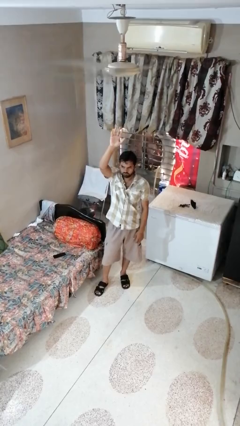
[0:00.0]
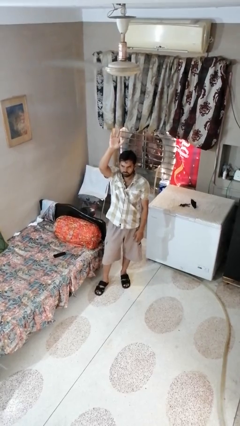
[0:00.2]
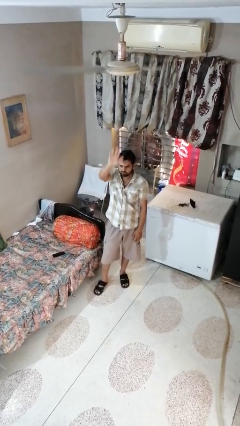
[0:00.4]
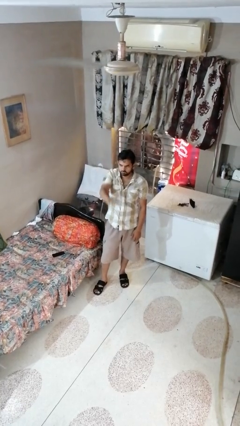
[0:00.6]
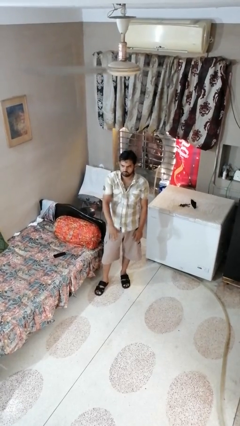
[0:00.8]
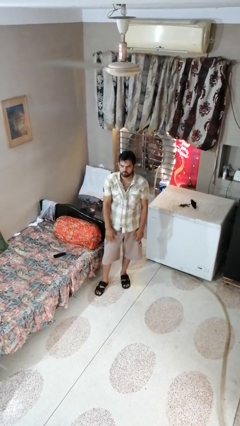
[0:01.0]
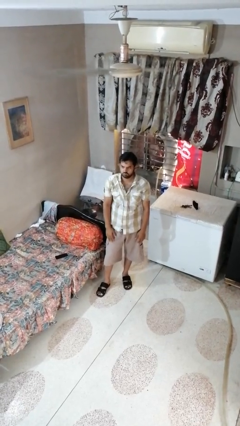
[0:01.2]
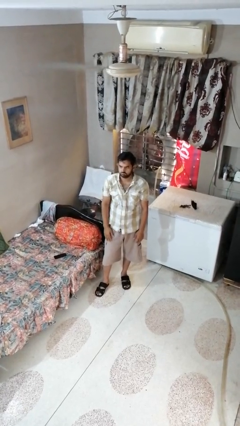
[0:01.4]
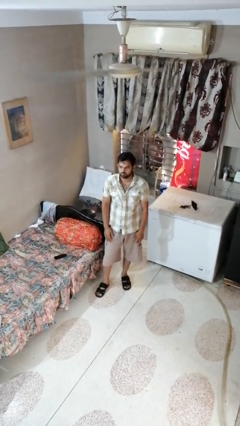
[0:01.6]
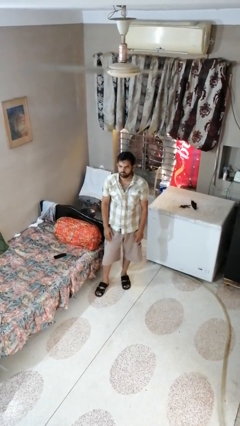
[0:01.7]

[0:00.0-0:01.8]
person gestures swipe down

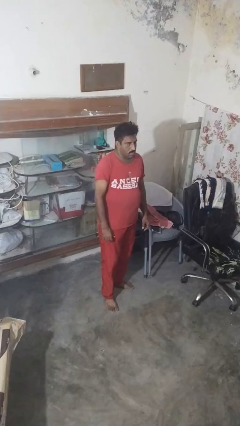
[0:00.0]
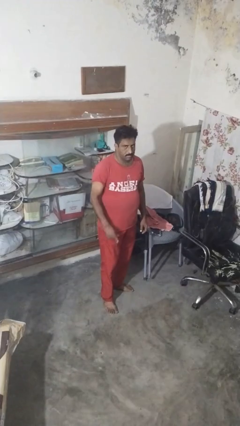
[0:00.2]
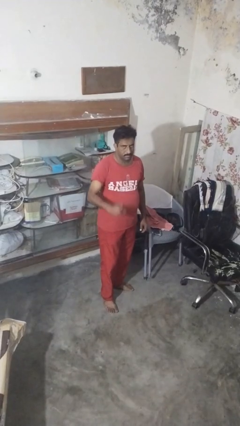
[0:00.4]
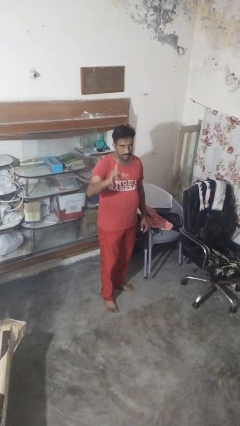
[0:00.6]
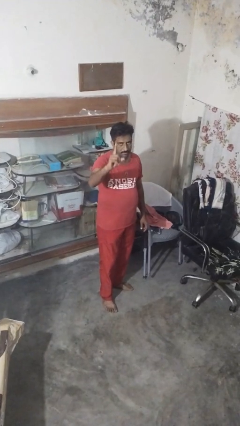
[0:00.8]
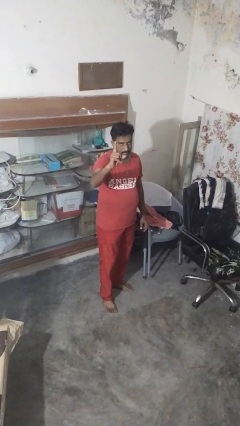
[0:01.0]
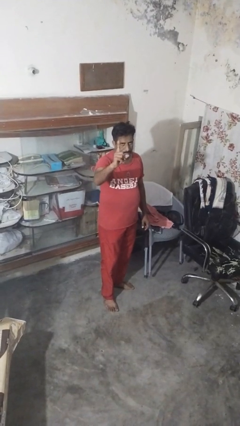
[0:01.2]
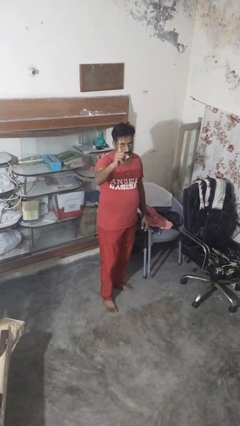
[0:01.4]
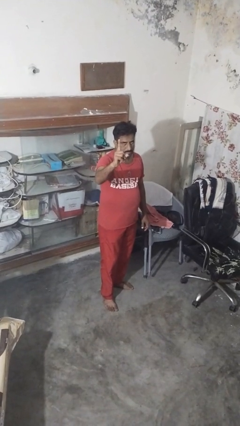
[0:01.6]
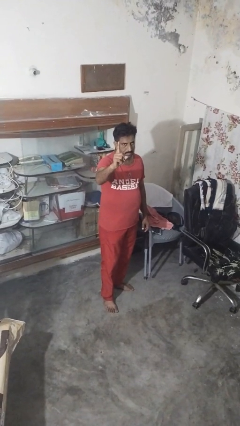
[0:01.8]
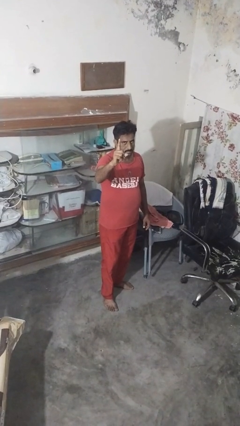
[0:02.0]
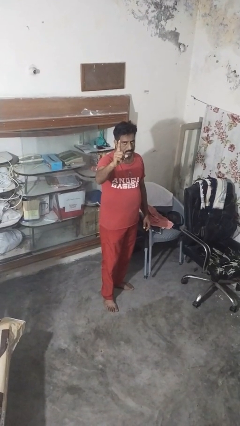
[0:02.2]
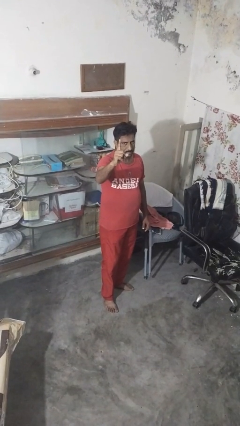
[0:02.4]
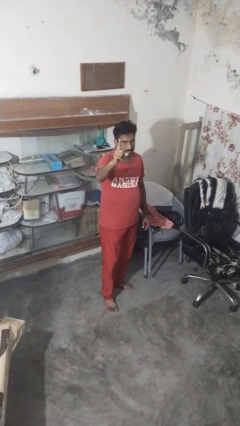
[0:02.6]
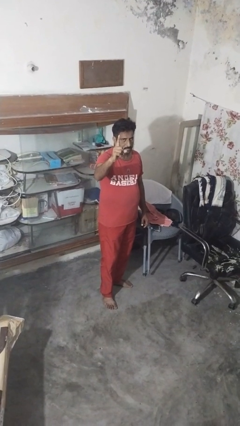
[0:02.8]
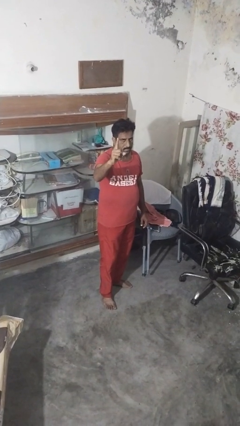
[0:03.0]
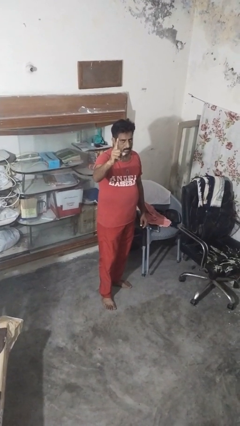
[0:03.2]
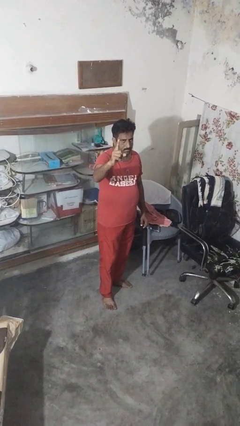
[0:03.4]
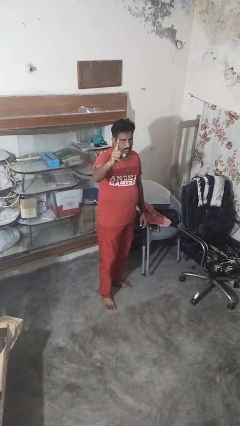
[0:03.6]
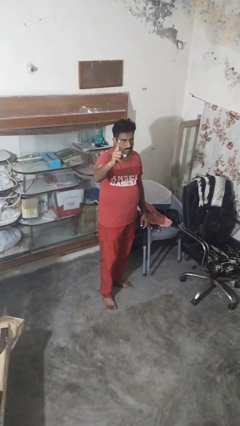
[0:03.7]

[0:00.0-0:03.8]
person gestures number one

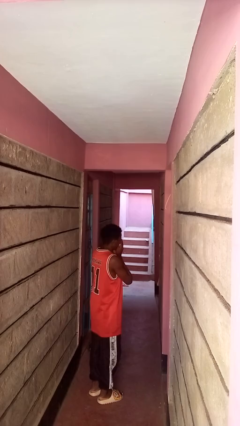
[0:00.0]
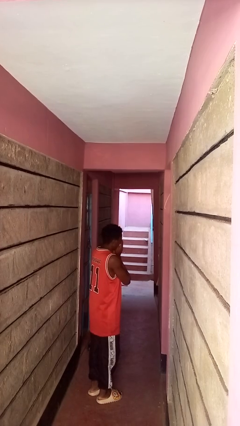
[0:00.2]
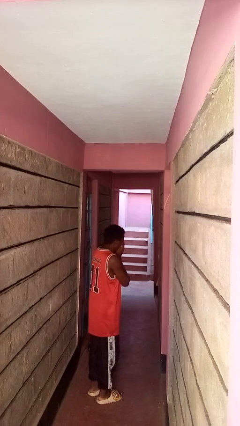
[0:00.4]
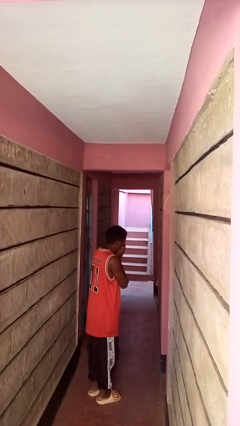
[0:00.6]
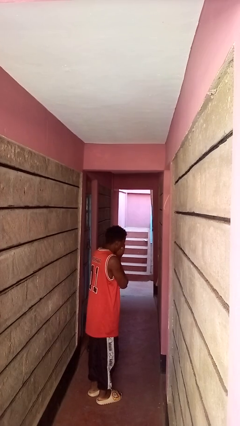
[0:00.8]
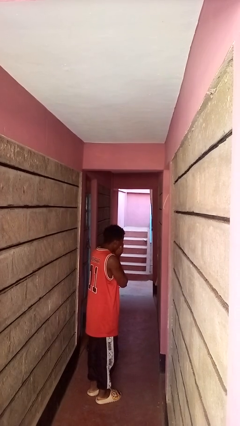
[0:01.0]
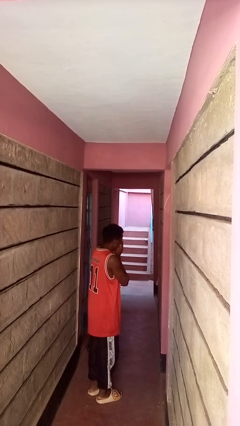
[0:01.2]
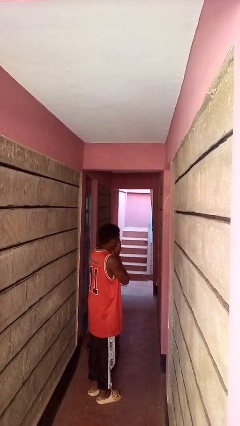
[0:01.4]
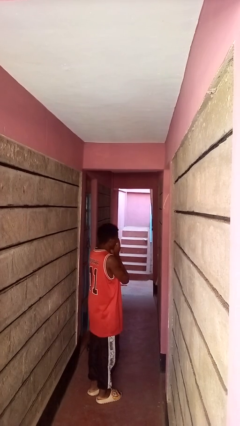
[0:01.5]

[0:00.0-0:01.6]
person sneezes into hand

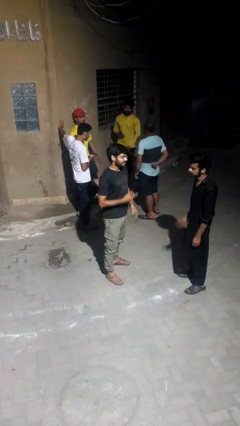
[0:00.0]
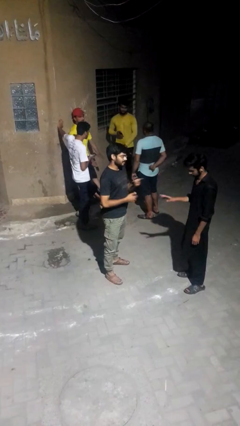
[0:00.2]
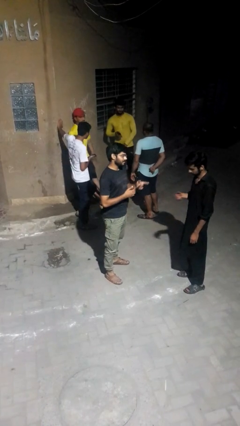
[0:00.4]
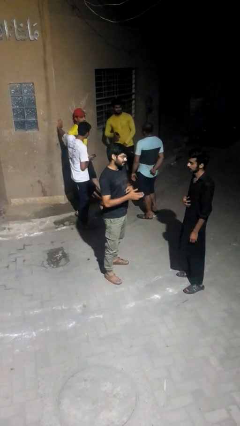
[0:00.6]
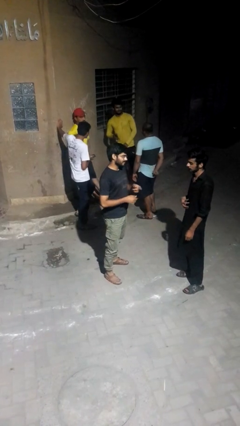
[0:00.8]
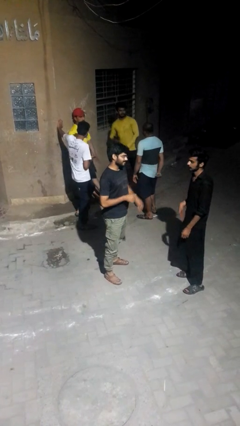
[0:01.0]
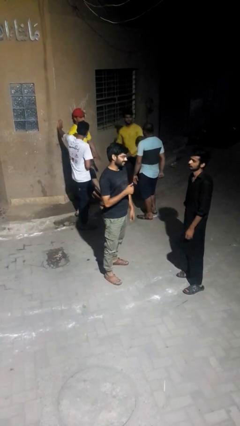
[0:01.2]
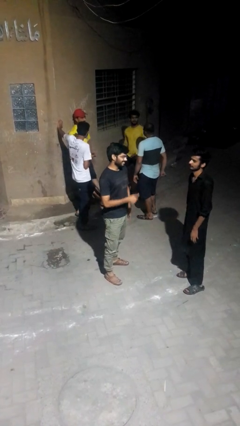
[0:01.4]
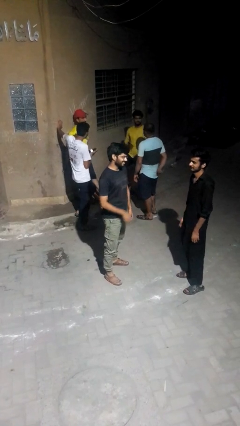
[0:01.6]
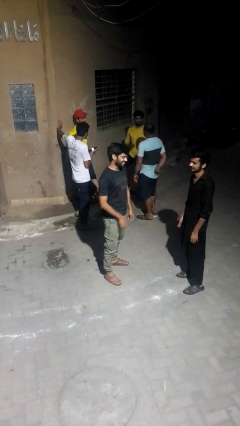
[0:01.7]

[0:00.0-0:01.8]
person talks to person

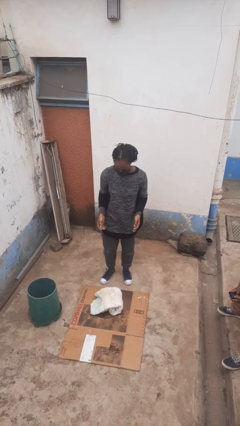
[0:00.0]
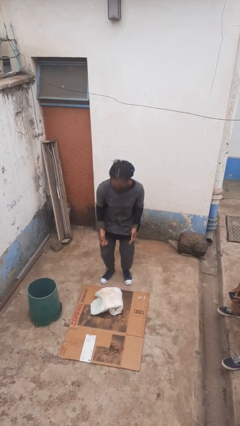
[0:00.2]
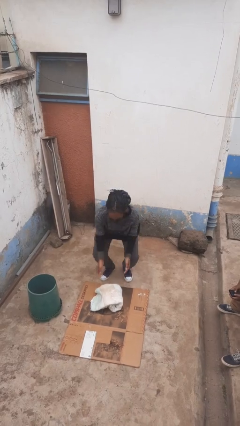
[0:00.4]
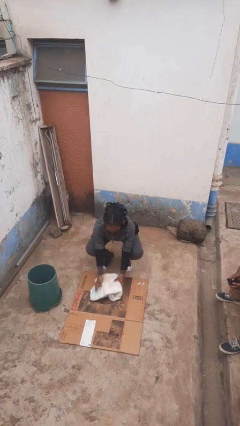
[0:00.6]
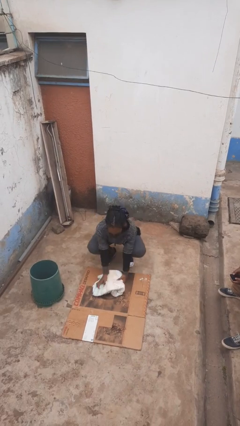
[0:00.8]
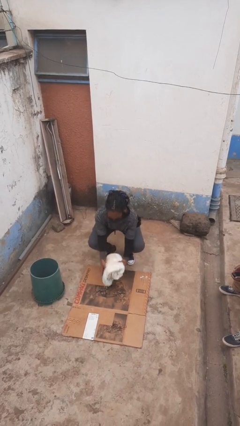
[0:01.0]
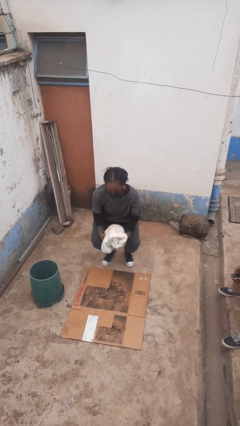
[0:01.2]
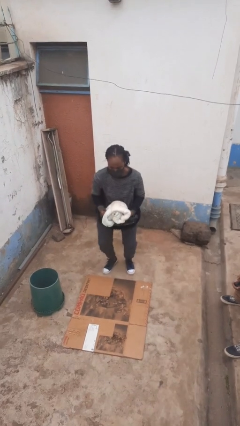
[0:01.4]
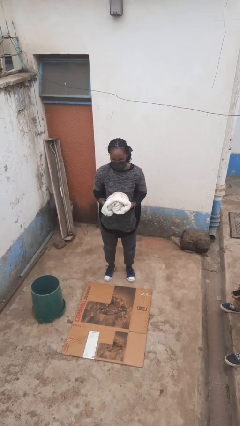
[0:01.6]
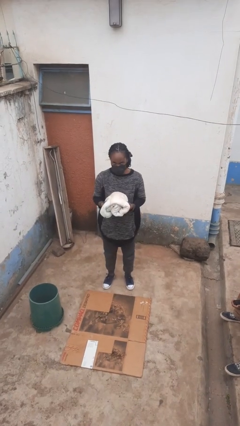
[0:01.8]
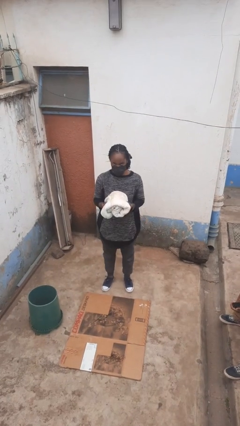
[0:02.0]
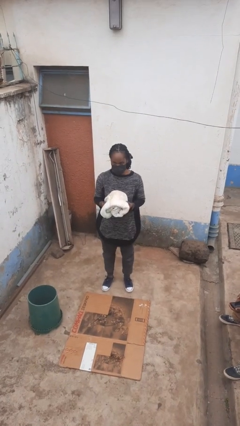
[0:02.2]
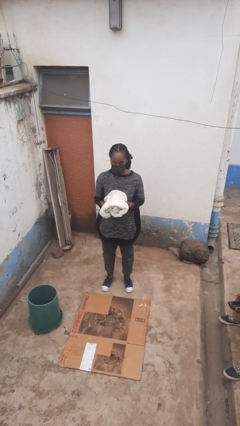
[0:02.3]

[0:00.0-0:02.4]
person picks up object from floor

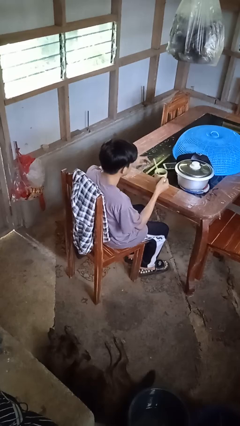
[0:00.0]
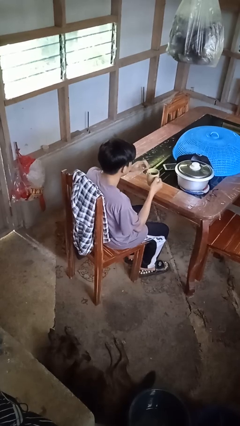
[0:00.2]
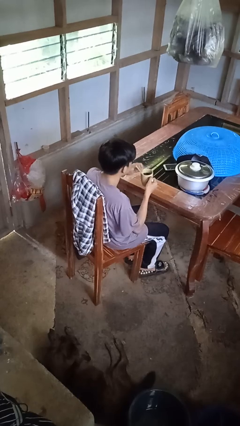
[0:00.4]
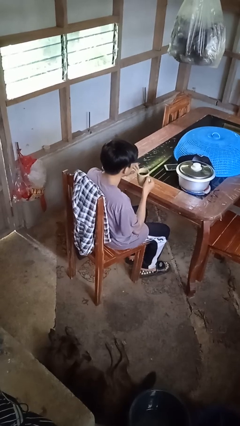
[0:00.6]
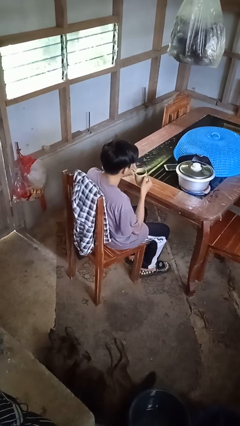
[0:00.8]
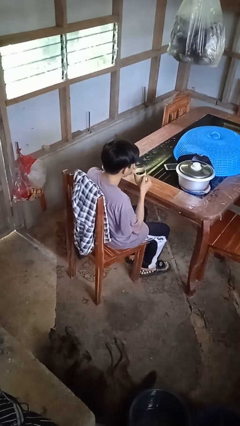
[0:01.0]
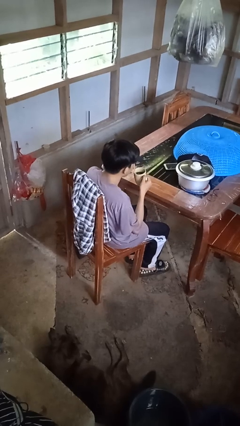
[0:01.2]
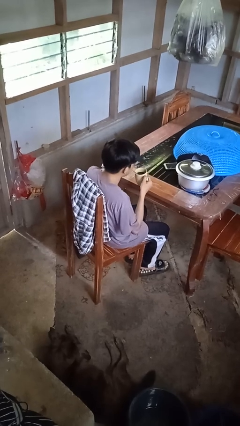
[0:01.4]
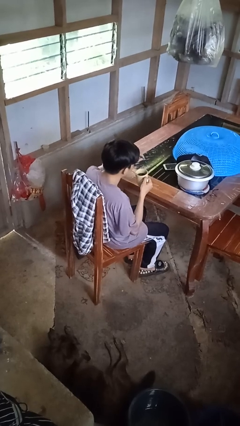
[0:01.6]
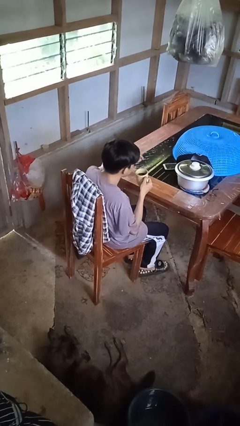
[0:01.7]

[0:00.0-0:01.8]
person drinks from straw

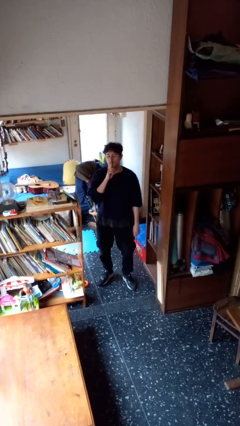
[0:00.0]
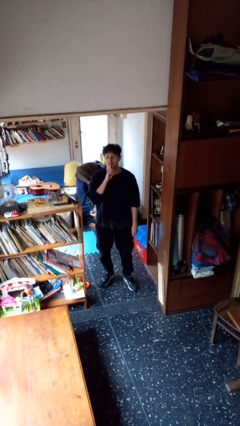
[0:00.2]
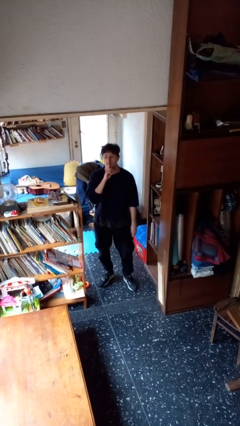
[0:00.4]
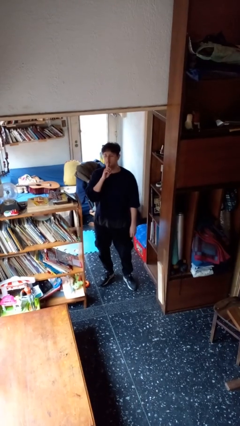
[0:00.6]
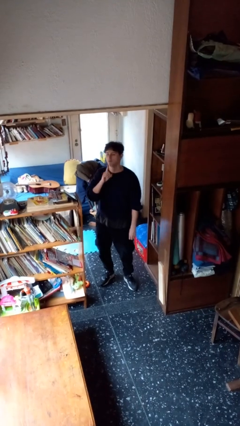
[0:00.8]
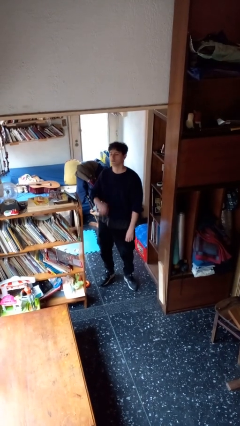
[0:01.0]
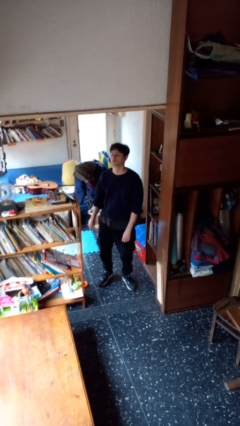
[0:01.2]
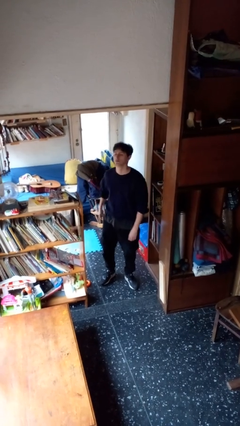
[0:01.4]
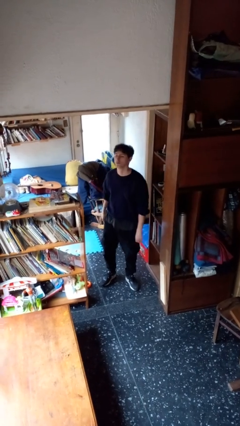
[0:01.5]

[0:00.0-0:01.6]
person gestures be quiet

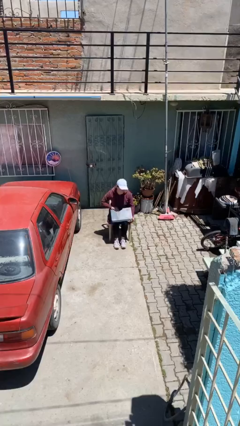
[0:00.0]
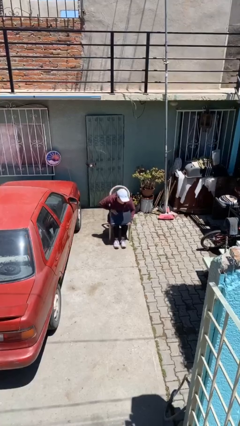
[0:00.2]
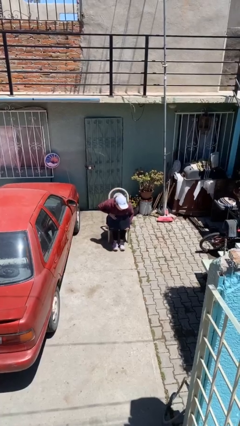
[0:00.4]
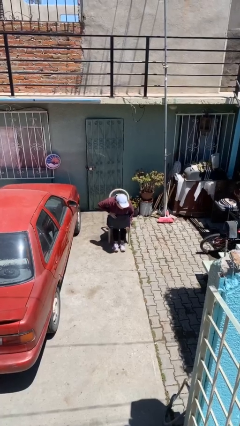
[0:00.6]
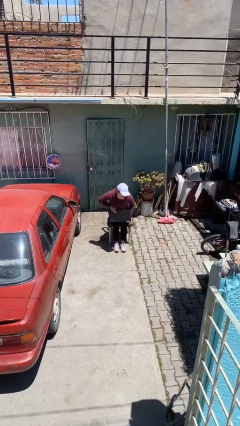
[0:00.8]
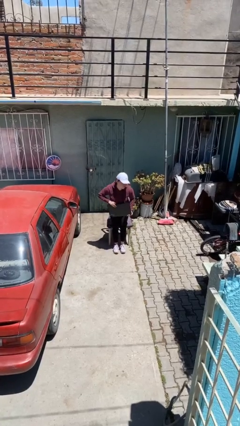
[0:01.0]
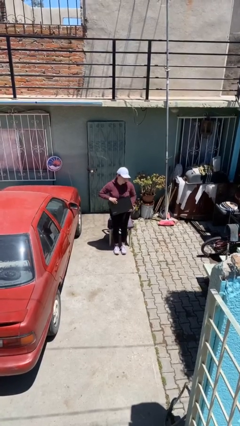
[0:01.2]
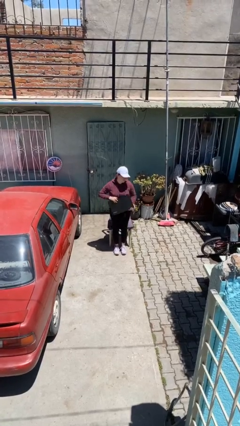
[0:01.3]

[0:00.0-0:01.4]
person stands up

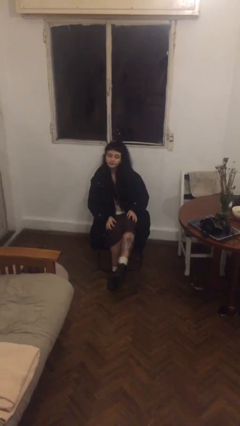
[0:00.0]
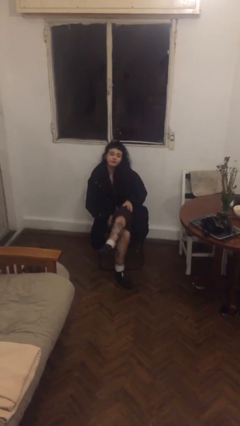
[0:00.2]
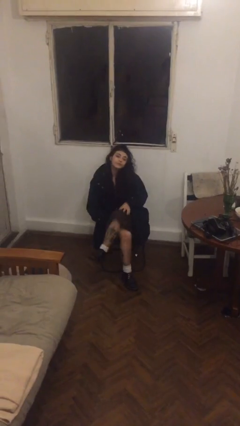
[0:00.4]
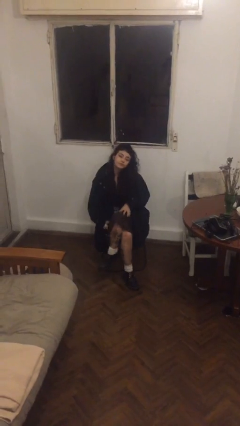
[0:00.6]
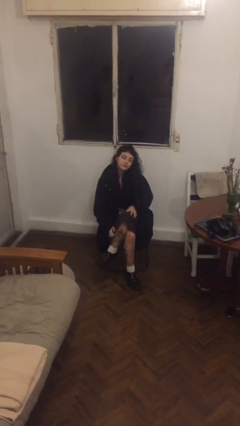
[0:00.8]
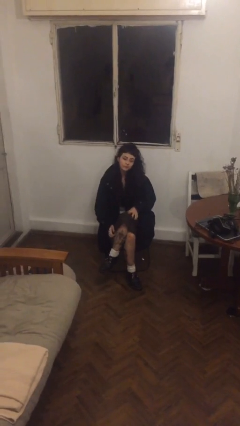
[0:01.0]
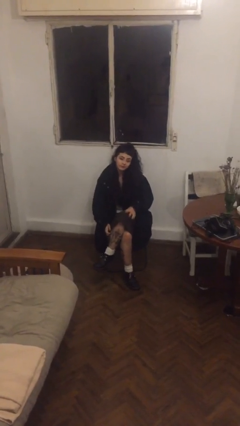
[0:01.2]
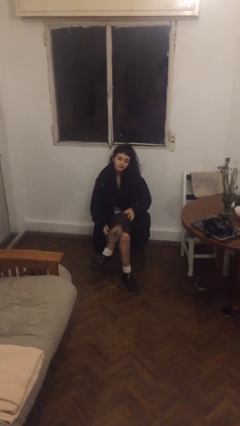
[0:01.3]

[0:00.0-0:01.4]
person crosses legs
